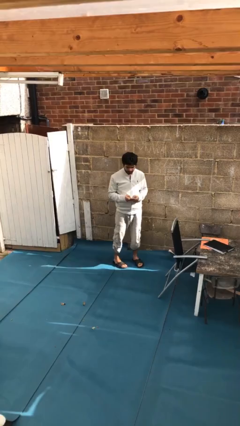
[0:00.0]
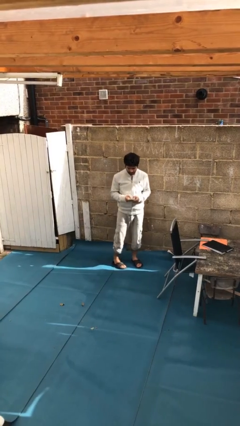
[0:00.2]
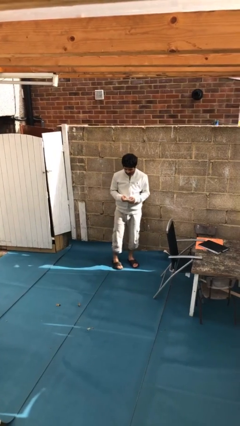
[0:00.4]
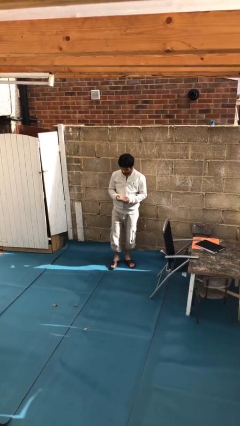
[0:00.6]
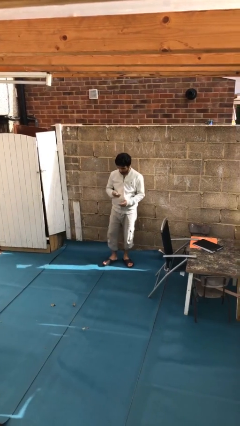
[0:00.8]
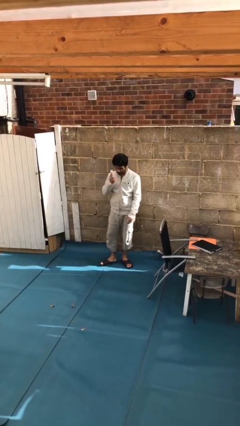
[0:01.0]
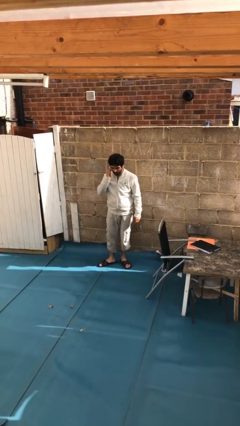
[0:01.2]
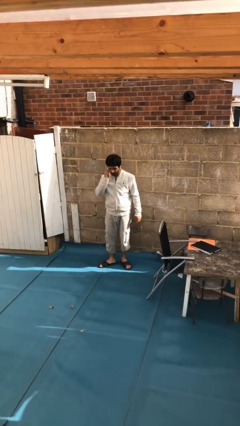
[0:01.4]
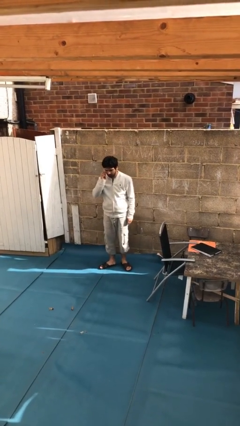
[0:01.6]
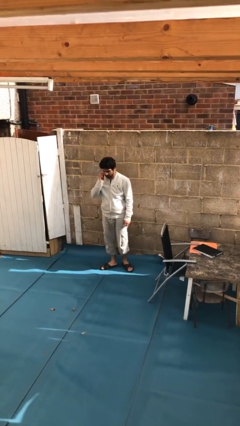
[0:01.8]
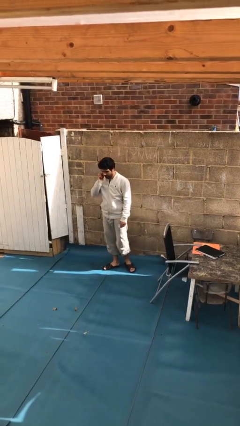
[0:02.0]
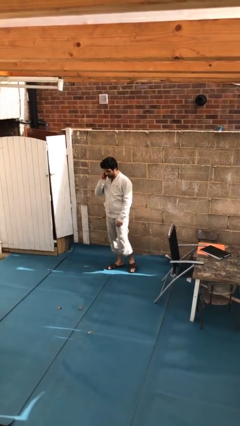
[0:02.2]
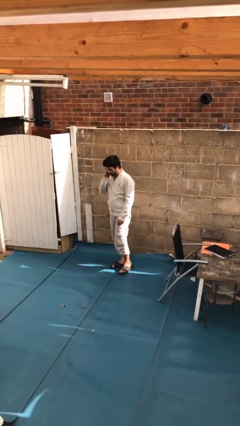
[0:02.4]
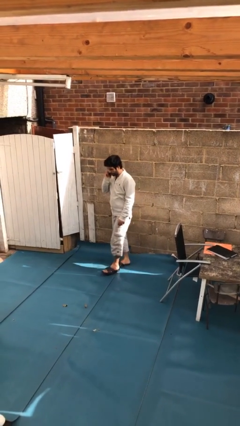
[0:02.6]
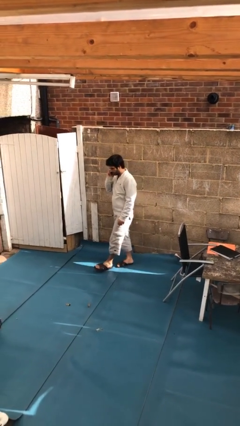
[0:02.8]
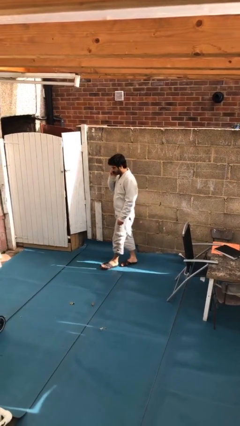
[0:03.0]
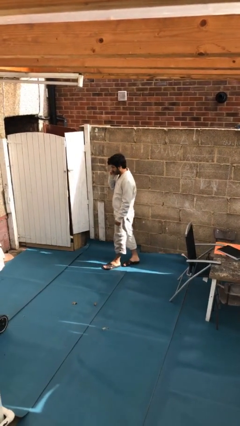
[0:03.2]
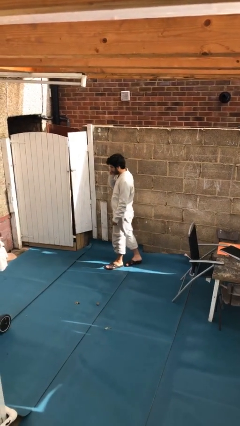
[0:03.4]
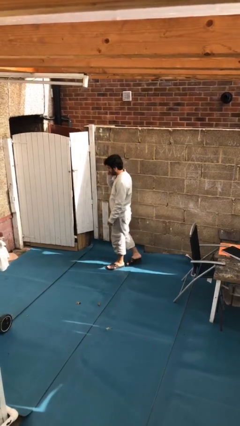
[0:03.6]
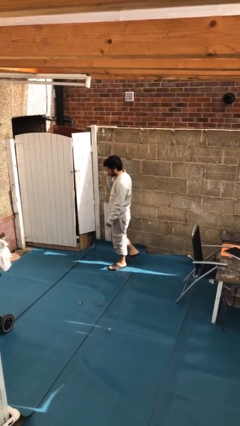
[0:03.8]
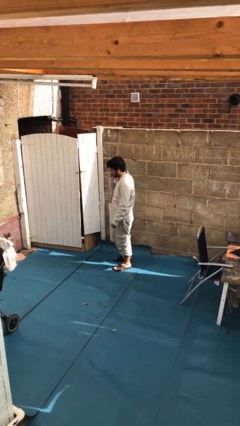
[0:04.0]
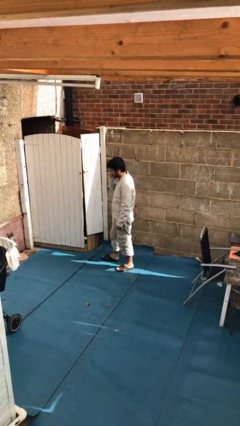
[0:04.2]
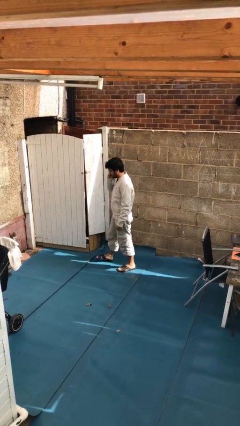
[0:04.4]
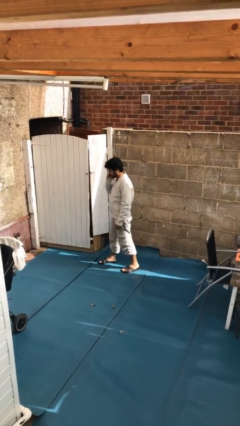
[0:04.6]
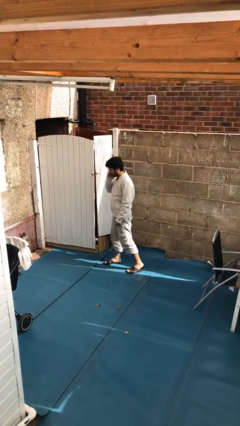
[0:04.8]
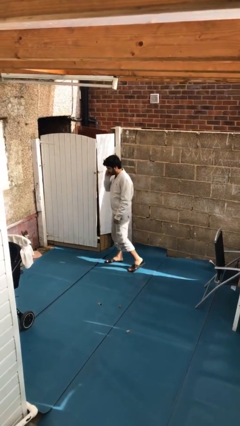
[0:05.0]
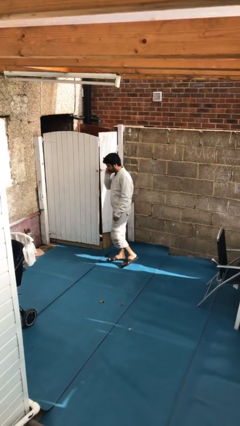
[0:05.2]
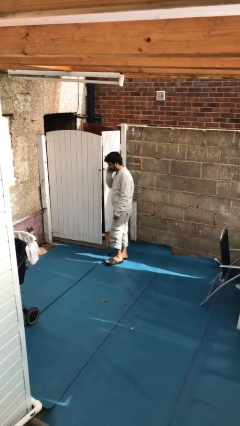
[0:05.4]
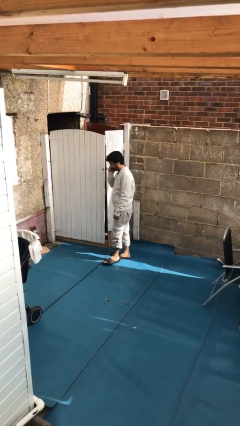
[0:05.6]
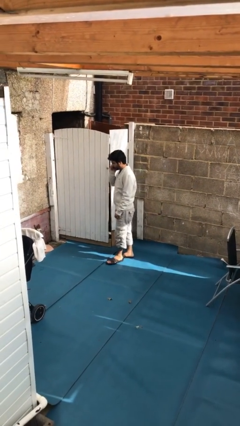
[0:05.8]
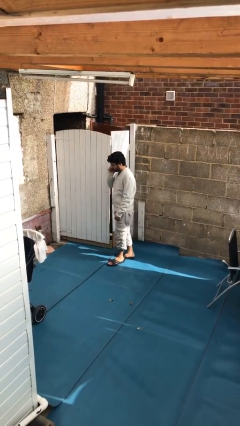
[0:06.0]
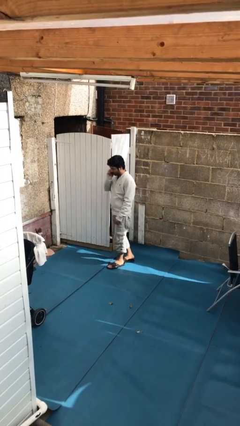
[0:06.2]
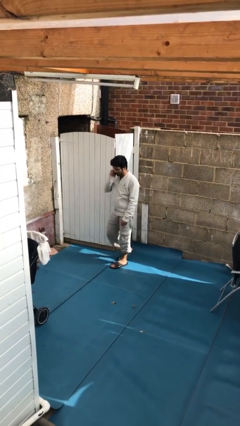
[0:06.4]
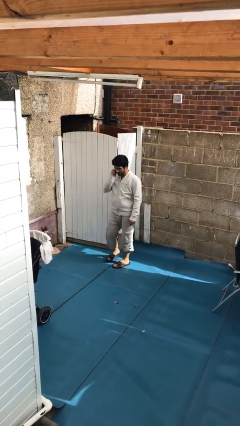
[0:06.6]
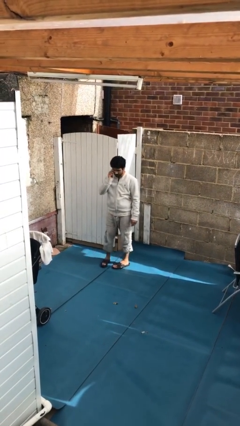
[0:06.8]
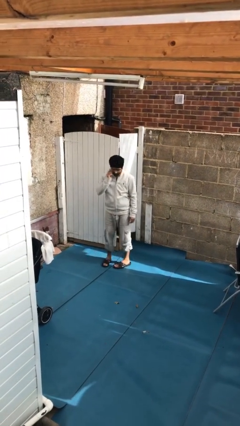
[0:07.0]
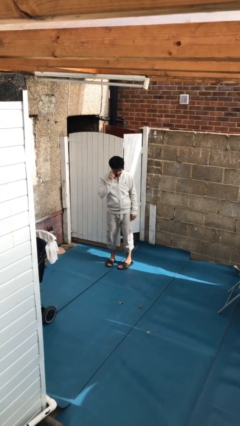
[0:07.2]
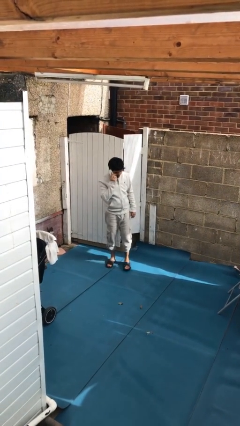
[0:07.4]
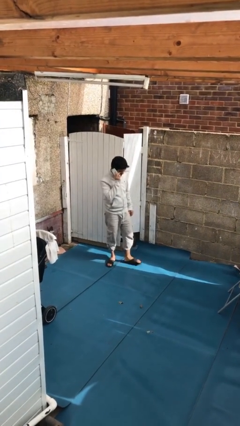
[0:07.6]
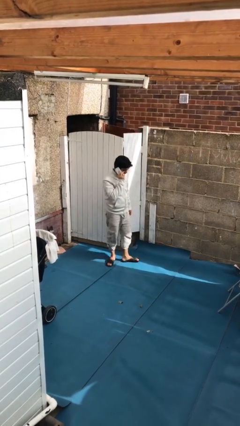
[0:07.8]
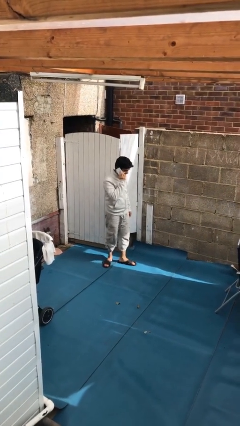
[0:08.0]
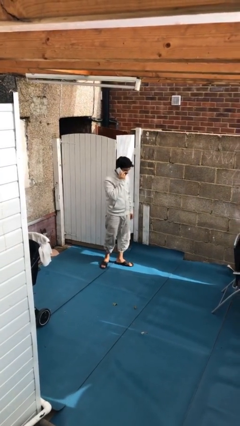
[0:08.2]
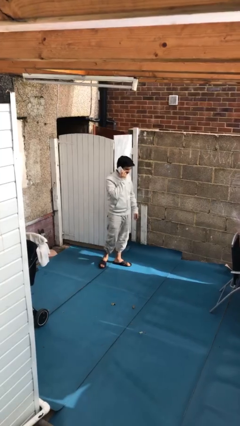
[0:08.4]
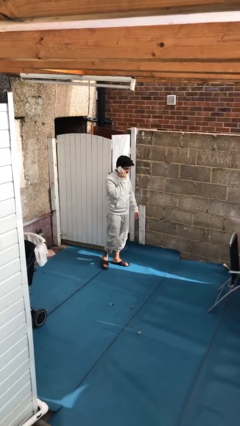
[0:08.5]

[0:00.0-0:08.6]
person talks on phone

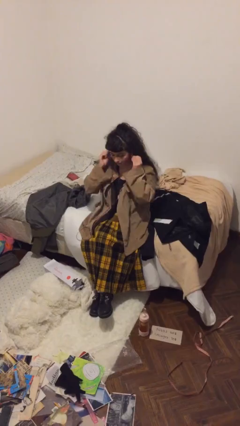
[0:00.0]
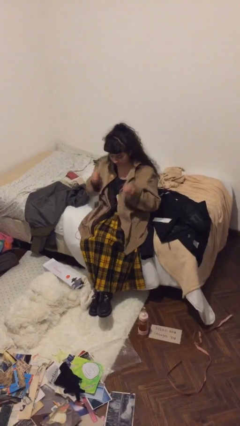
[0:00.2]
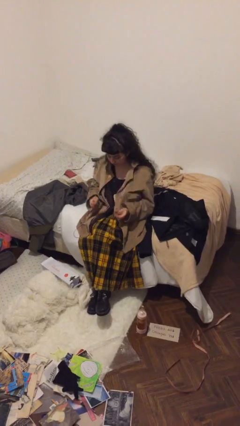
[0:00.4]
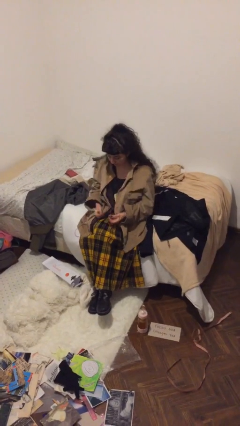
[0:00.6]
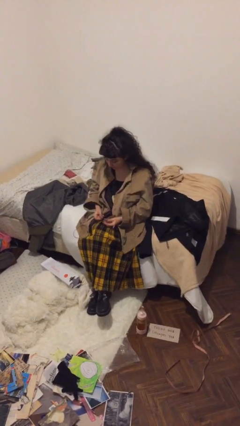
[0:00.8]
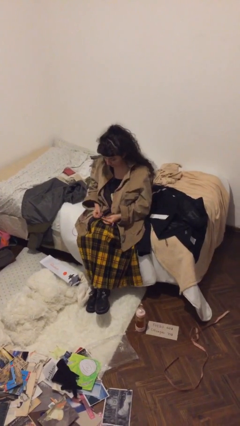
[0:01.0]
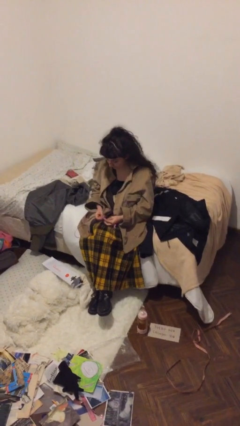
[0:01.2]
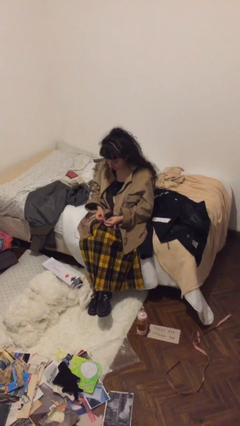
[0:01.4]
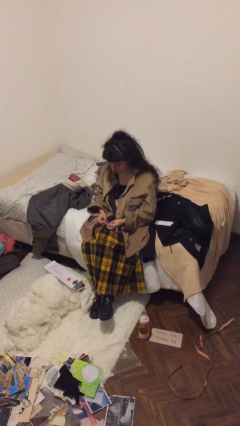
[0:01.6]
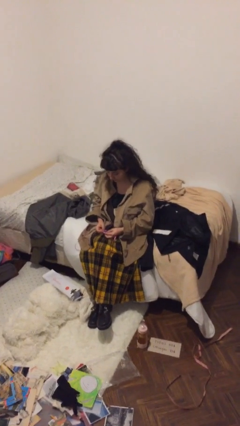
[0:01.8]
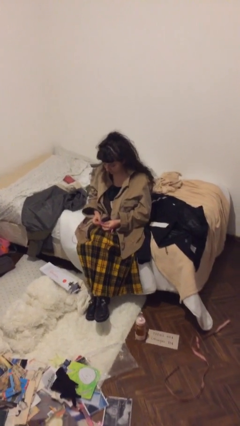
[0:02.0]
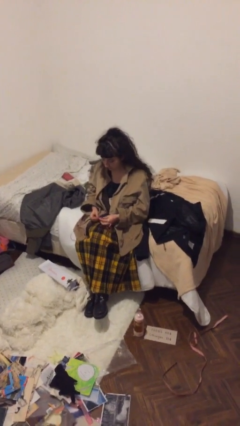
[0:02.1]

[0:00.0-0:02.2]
person takes off headphones

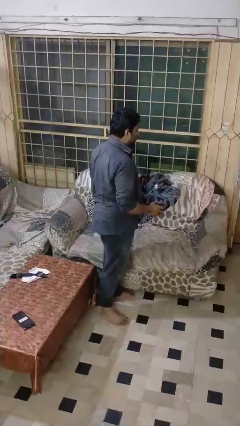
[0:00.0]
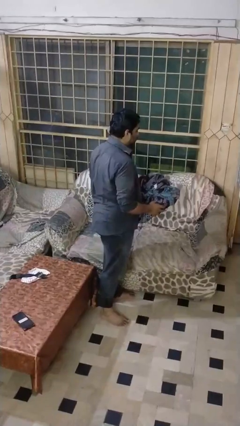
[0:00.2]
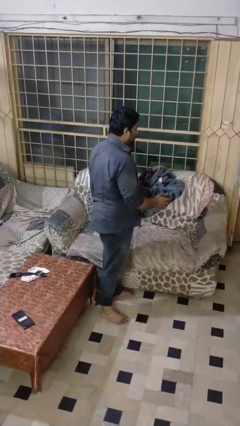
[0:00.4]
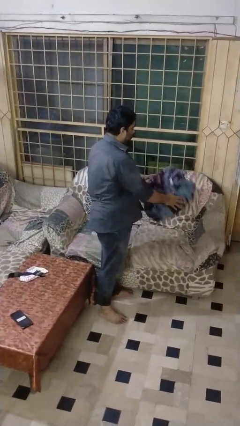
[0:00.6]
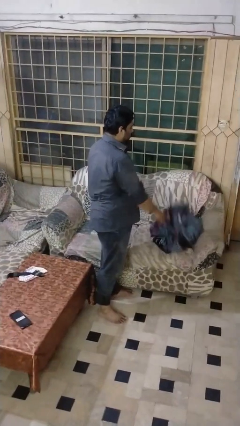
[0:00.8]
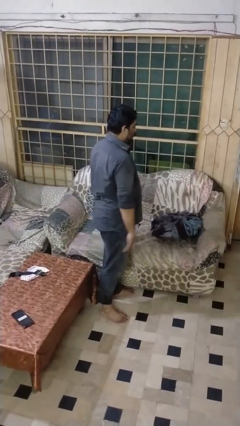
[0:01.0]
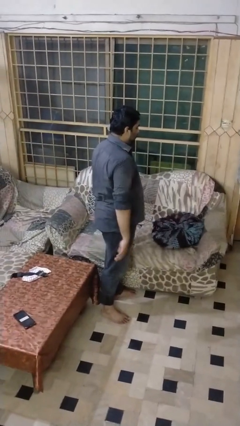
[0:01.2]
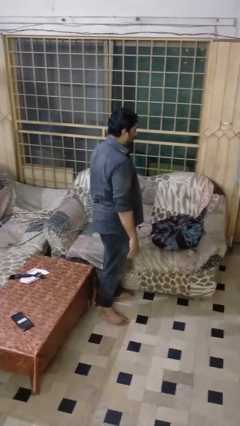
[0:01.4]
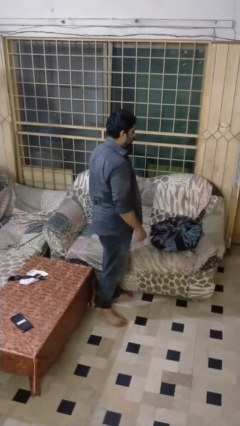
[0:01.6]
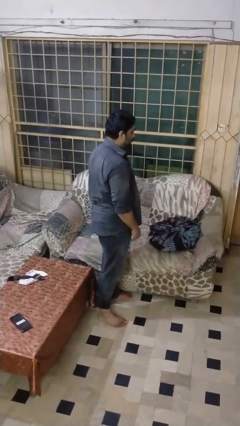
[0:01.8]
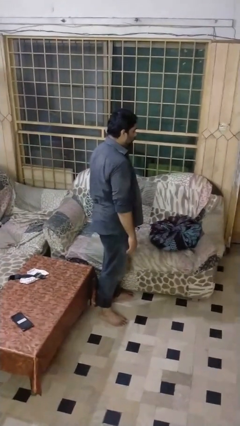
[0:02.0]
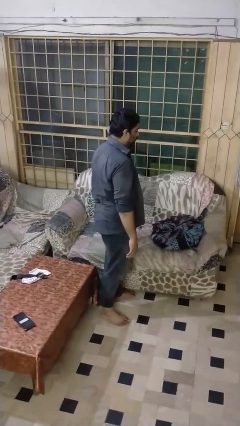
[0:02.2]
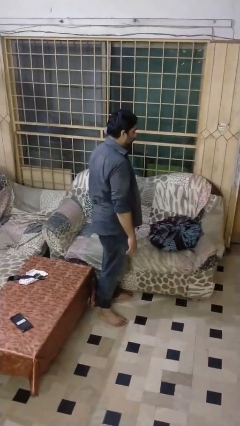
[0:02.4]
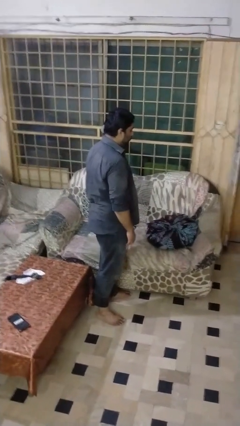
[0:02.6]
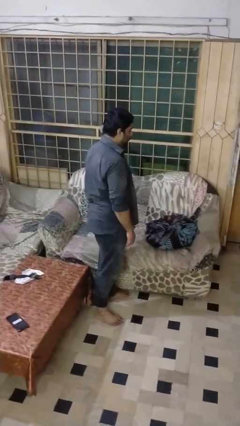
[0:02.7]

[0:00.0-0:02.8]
person puts down object on couch

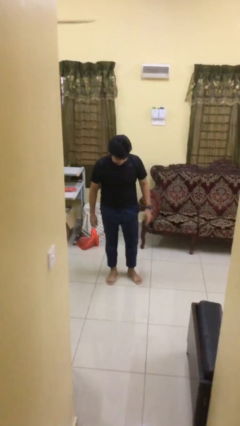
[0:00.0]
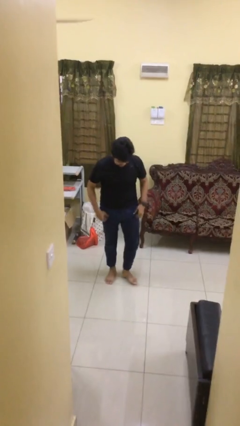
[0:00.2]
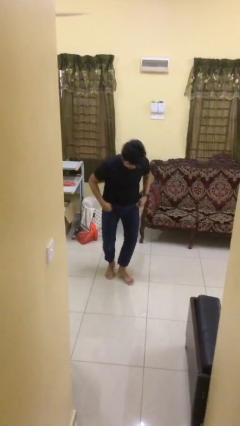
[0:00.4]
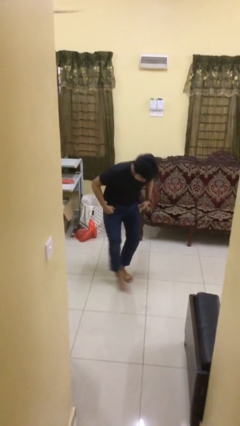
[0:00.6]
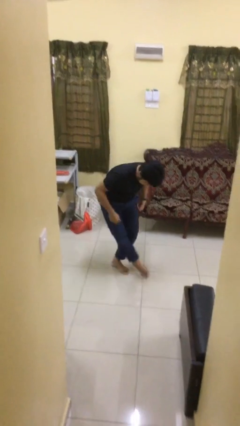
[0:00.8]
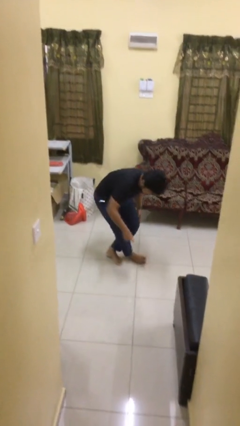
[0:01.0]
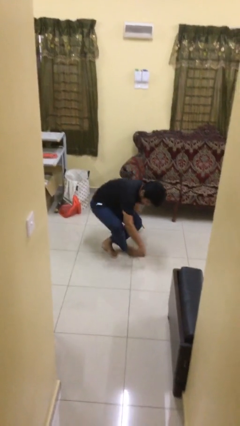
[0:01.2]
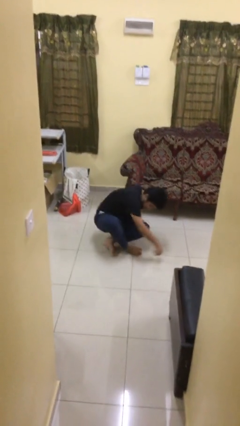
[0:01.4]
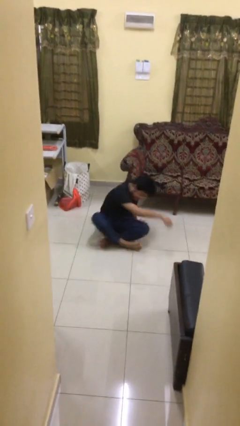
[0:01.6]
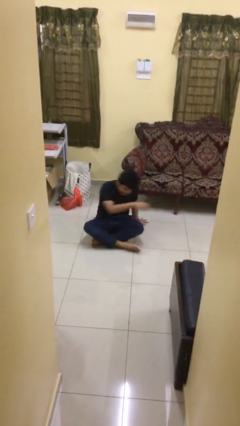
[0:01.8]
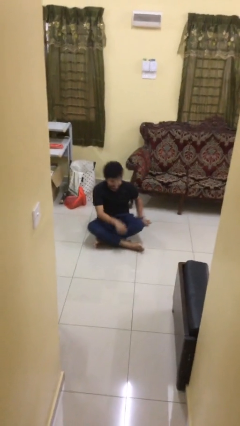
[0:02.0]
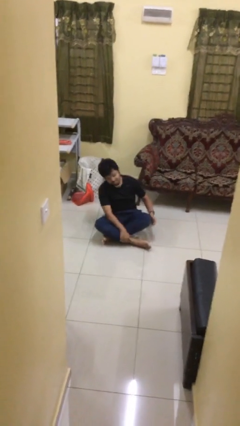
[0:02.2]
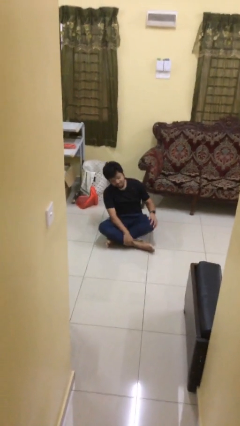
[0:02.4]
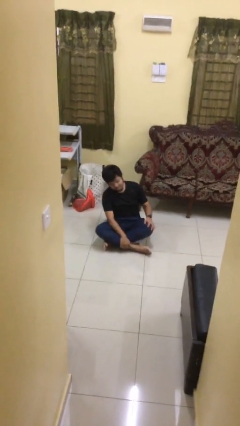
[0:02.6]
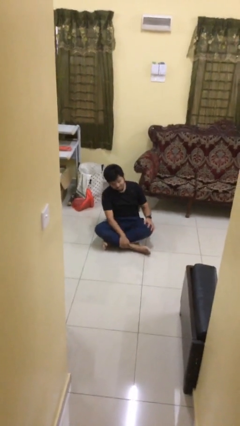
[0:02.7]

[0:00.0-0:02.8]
person sits crisscross

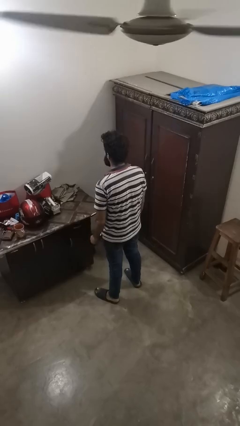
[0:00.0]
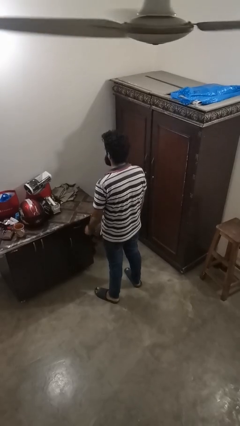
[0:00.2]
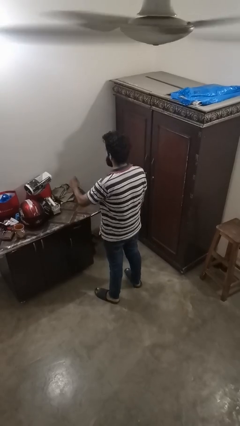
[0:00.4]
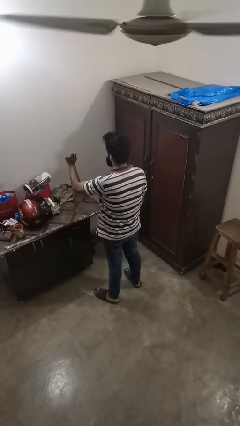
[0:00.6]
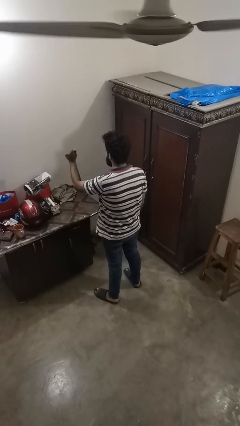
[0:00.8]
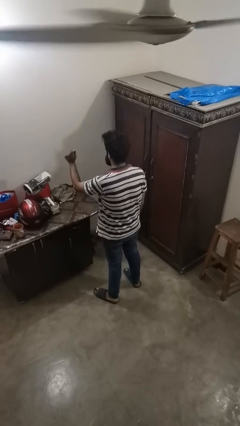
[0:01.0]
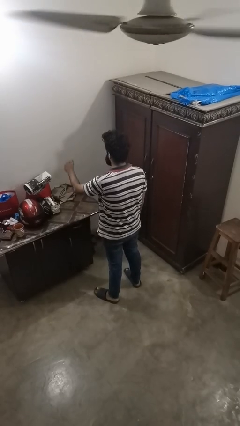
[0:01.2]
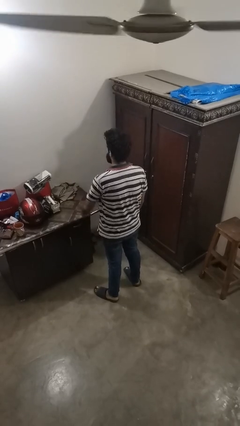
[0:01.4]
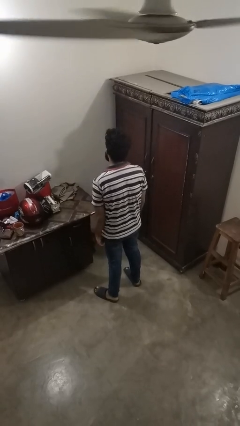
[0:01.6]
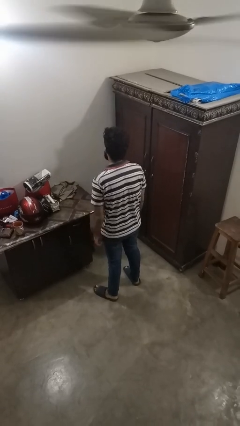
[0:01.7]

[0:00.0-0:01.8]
person snaps fingers
